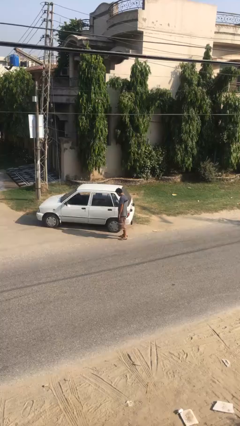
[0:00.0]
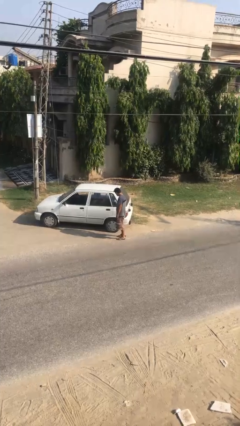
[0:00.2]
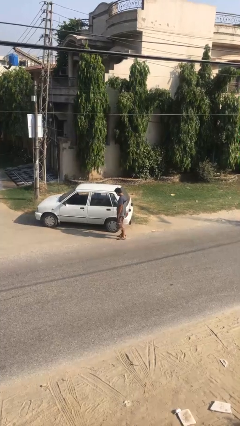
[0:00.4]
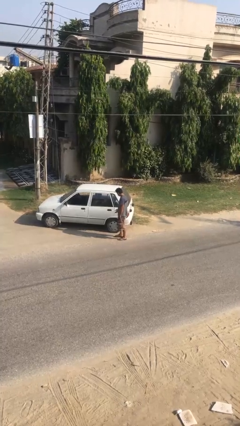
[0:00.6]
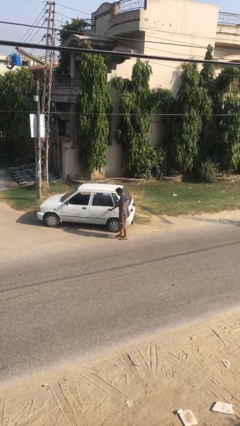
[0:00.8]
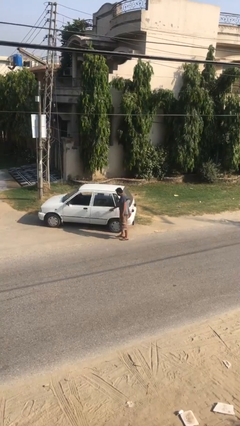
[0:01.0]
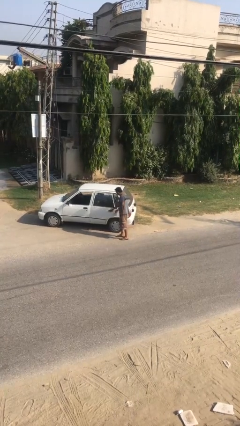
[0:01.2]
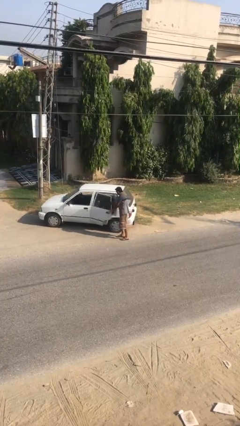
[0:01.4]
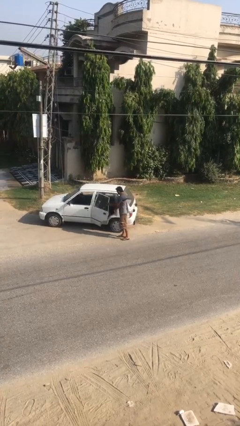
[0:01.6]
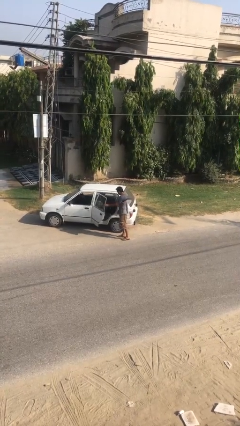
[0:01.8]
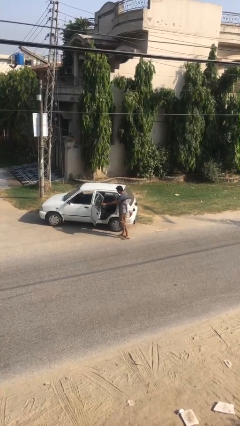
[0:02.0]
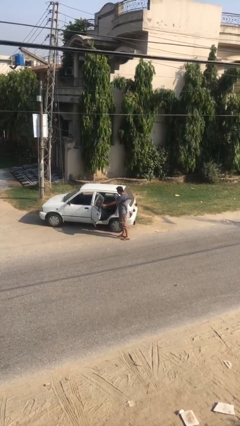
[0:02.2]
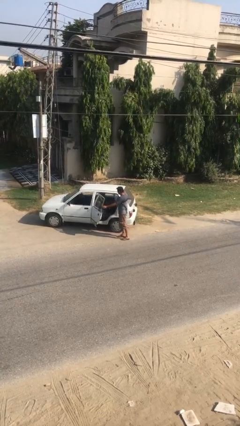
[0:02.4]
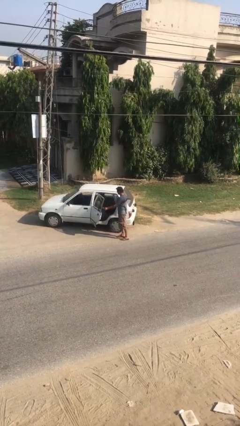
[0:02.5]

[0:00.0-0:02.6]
person opens car door

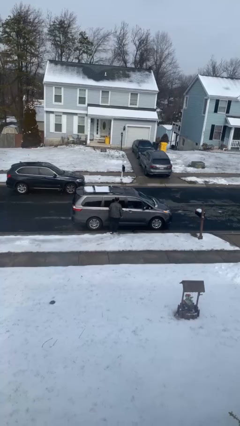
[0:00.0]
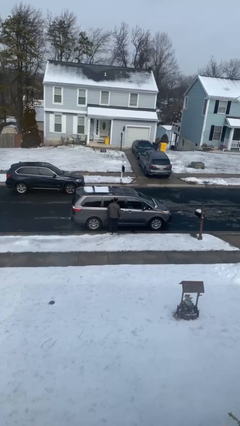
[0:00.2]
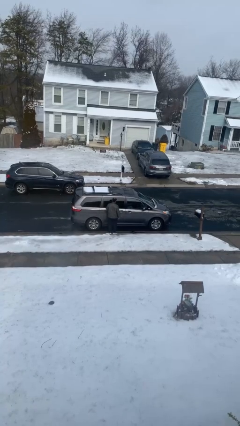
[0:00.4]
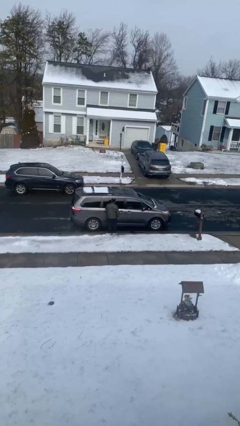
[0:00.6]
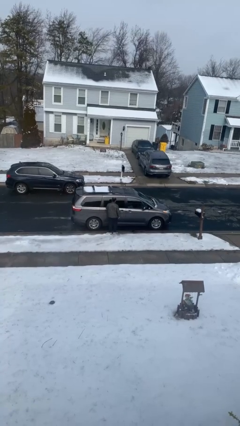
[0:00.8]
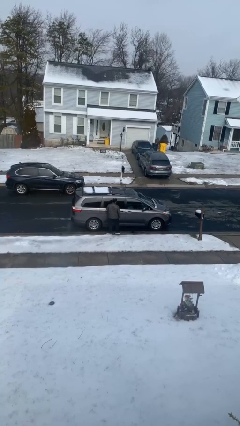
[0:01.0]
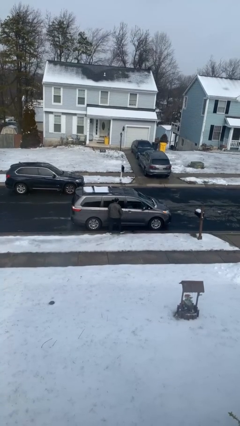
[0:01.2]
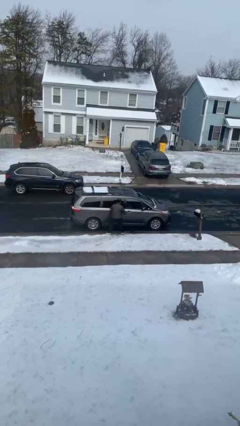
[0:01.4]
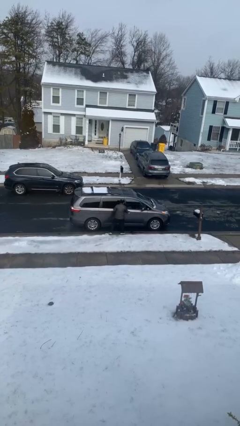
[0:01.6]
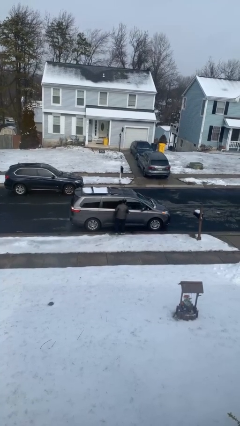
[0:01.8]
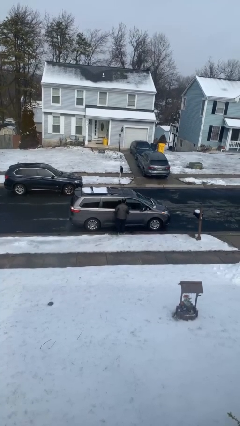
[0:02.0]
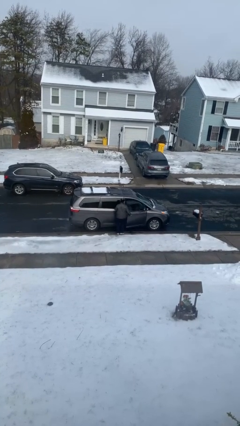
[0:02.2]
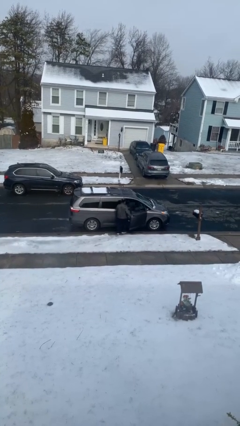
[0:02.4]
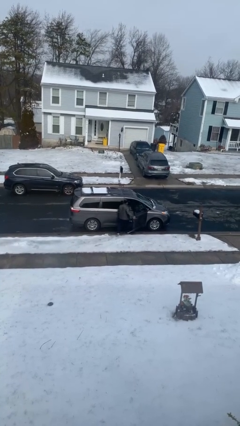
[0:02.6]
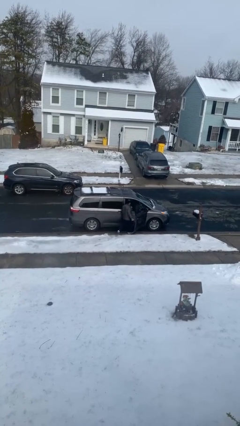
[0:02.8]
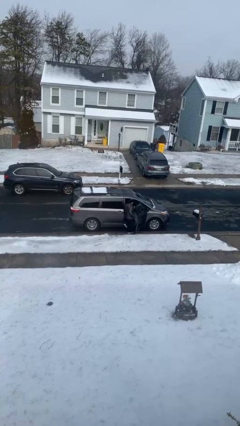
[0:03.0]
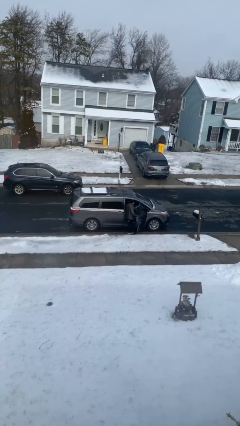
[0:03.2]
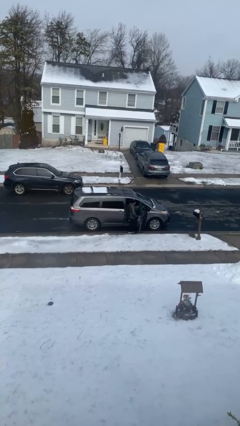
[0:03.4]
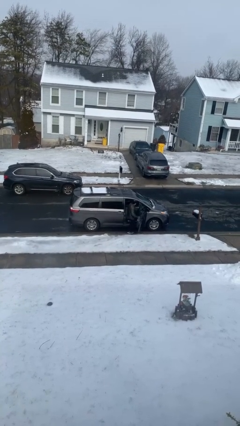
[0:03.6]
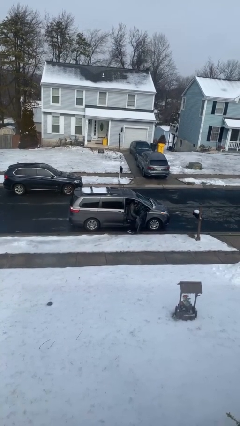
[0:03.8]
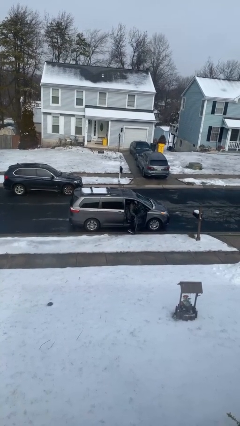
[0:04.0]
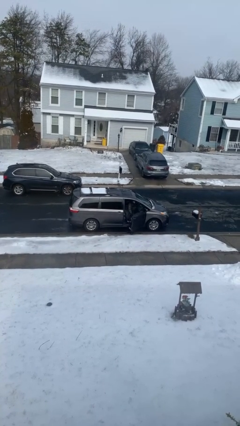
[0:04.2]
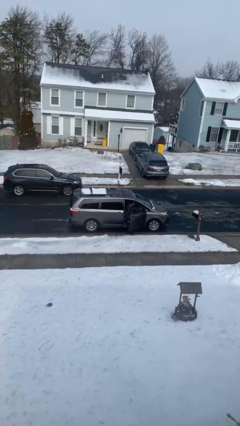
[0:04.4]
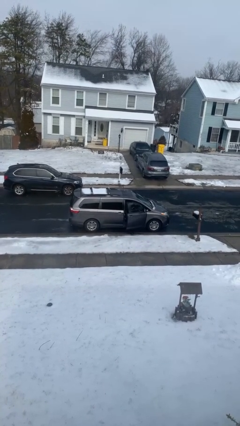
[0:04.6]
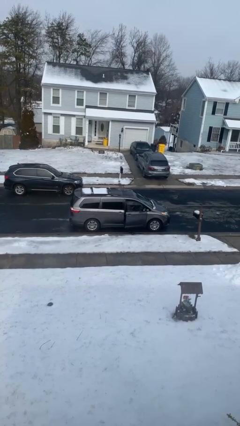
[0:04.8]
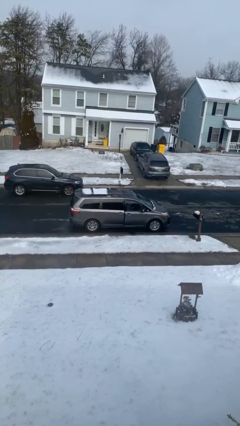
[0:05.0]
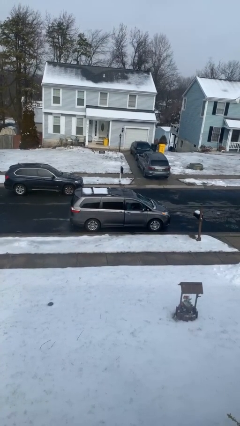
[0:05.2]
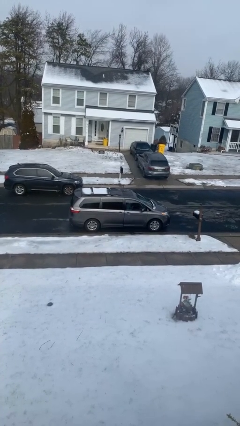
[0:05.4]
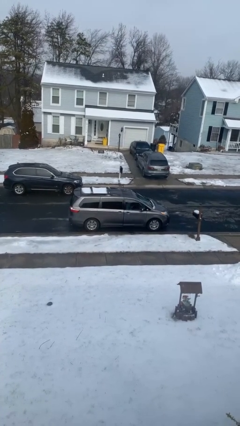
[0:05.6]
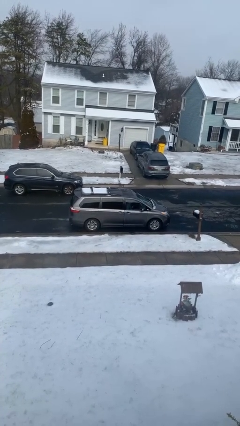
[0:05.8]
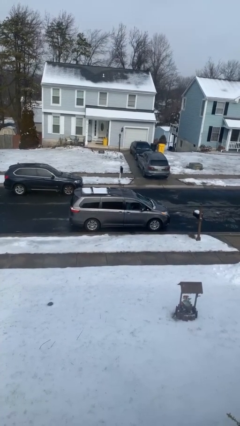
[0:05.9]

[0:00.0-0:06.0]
car picks up person

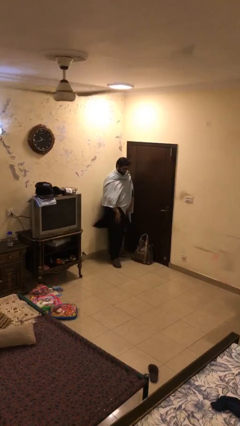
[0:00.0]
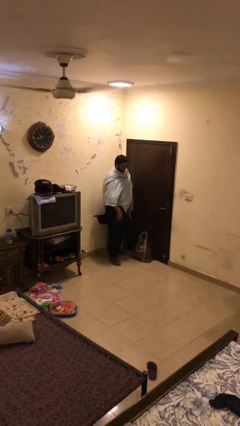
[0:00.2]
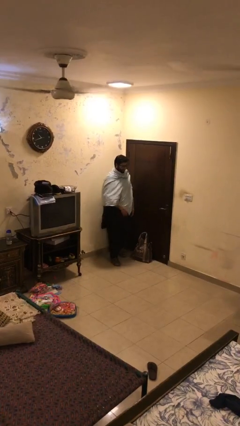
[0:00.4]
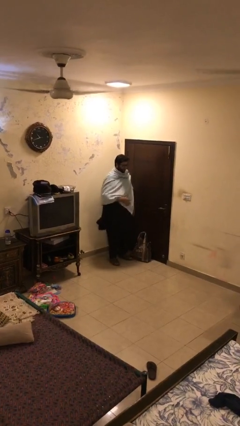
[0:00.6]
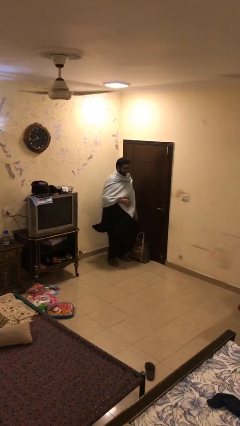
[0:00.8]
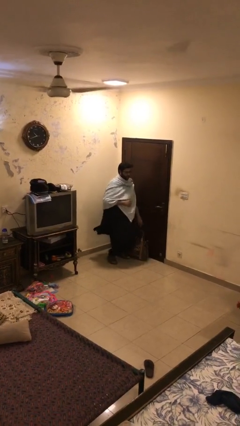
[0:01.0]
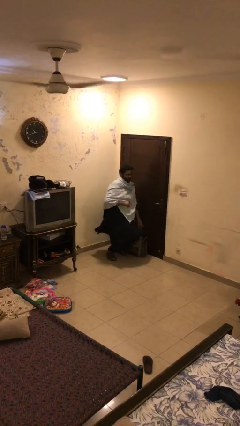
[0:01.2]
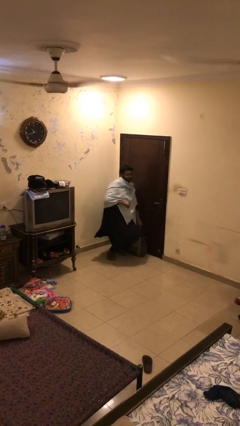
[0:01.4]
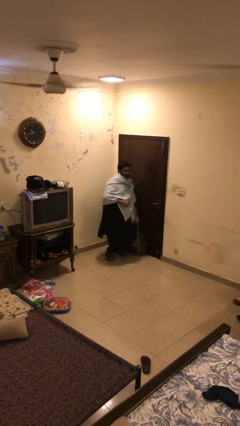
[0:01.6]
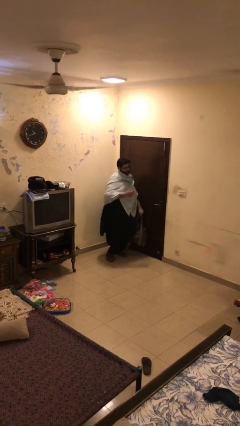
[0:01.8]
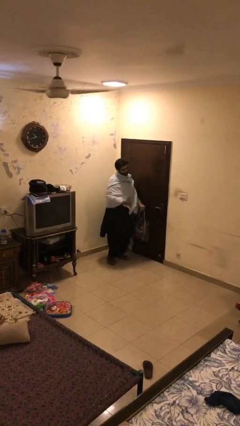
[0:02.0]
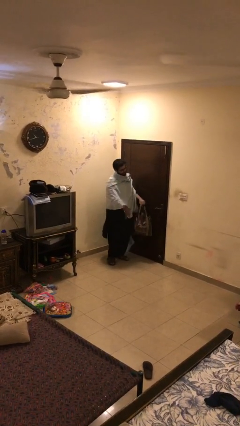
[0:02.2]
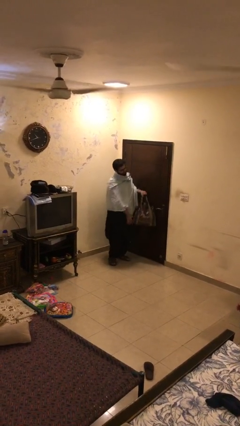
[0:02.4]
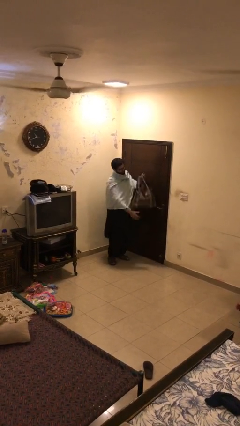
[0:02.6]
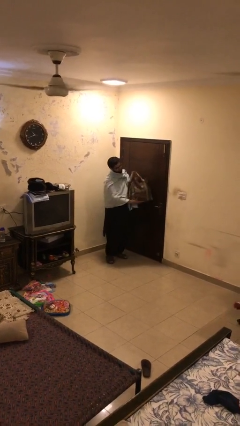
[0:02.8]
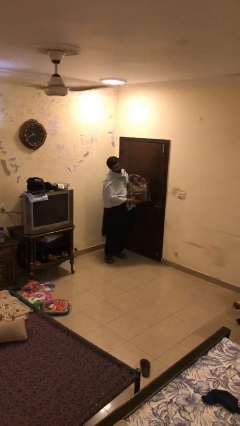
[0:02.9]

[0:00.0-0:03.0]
person picks up object from floor

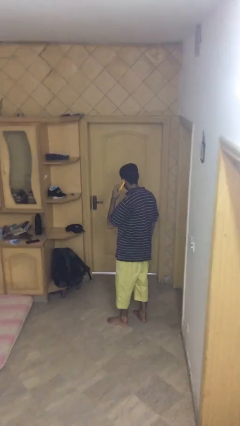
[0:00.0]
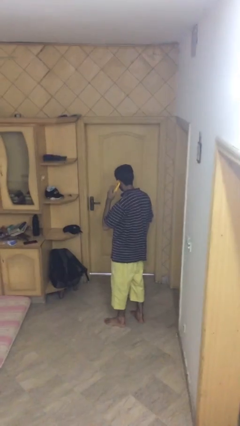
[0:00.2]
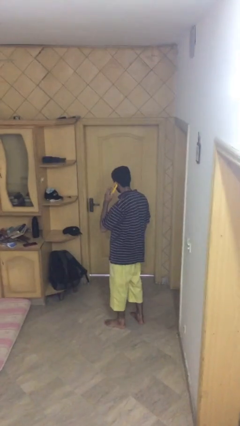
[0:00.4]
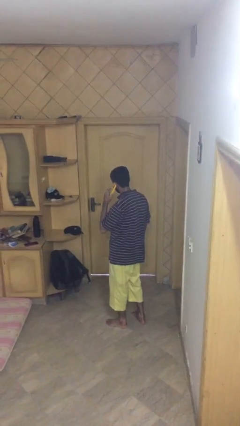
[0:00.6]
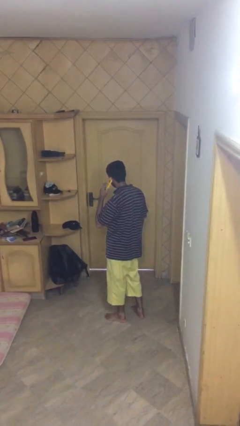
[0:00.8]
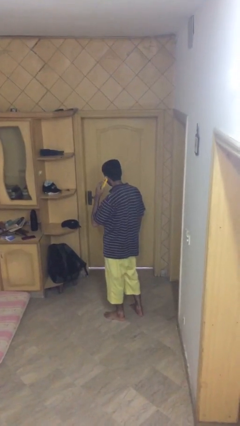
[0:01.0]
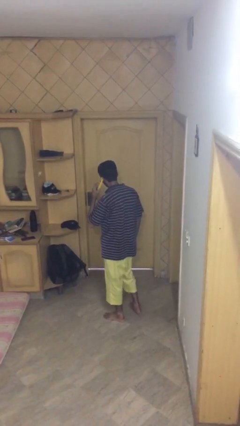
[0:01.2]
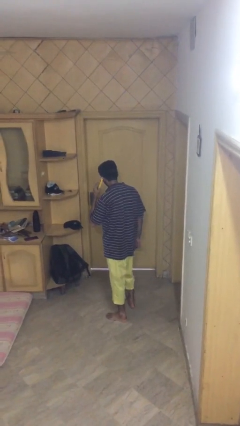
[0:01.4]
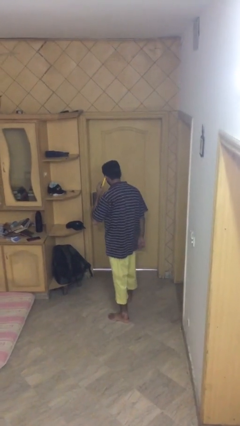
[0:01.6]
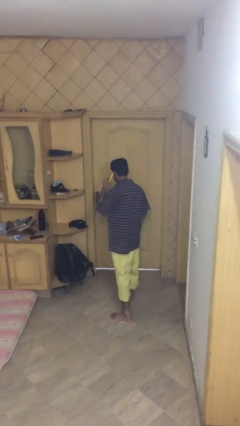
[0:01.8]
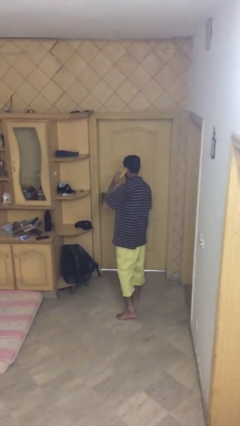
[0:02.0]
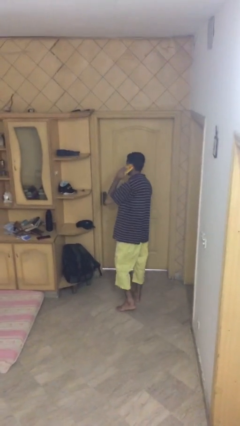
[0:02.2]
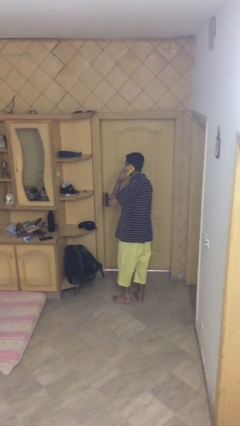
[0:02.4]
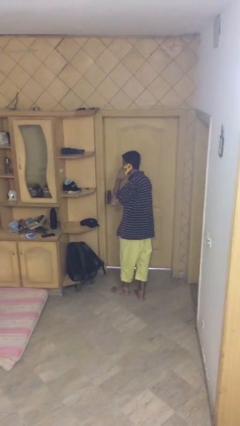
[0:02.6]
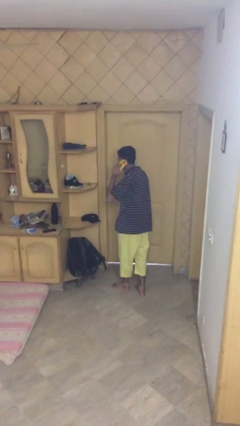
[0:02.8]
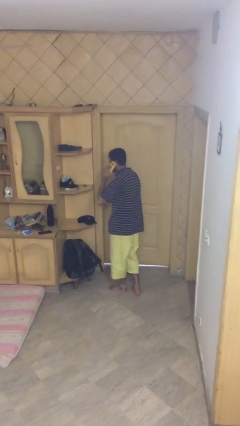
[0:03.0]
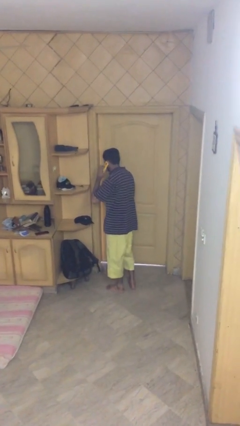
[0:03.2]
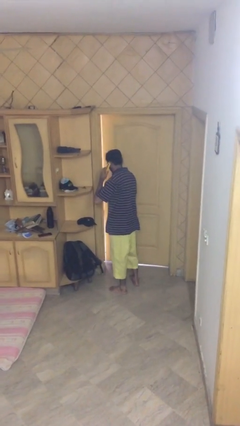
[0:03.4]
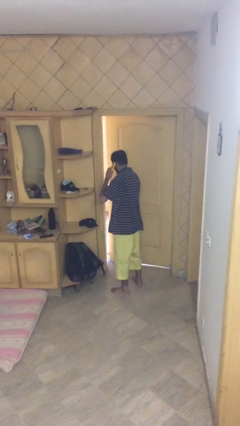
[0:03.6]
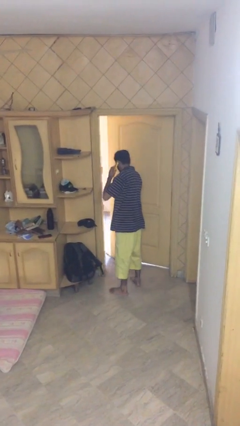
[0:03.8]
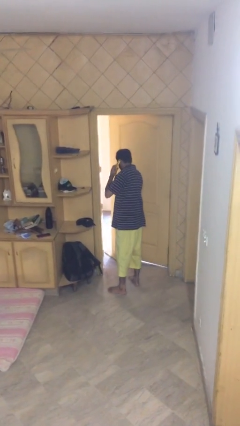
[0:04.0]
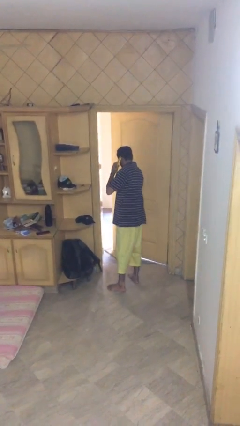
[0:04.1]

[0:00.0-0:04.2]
person opens facility door

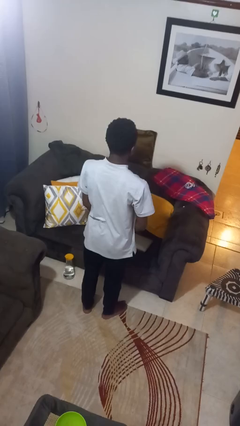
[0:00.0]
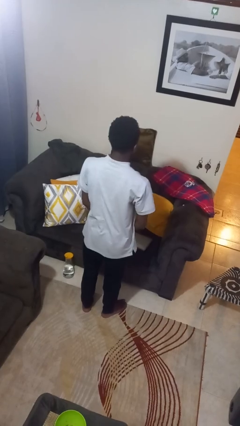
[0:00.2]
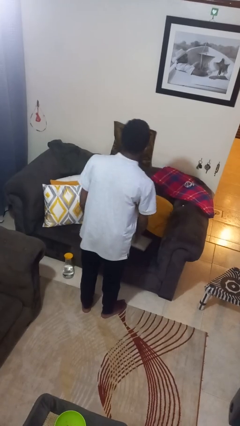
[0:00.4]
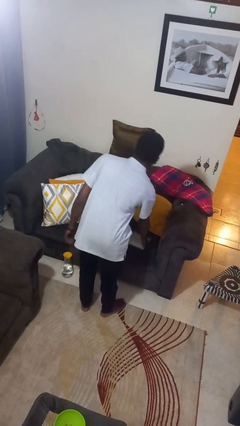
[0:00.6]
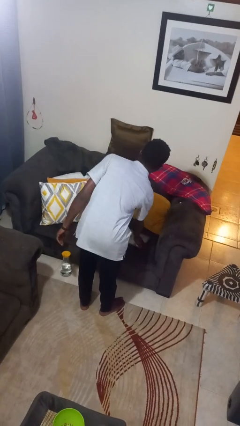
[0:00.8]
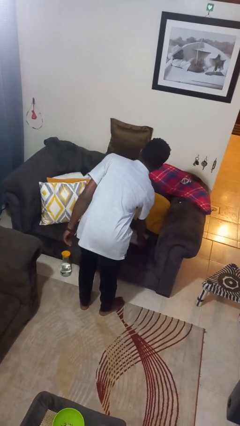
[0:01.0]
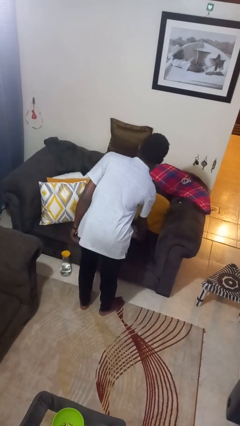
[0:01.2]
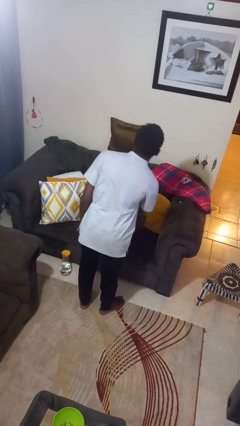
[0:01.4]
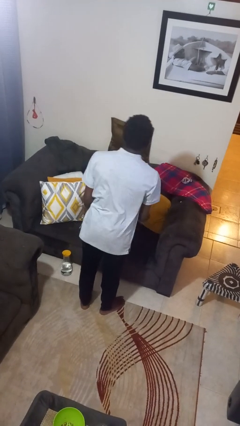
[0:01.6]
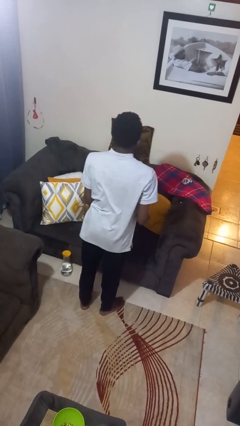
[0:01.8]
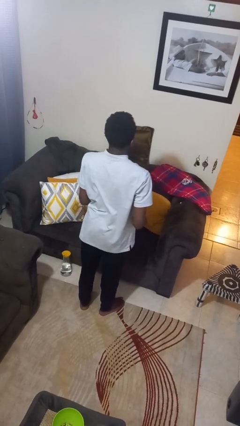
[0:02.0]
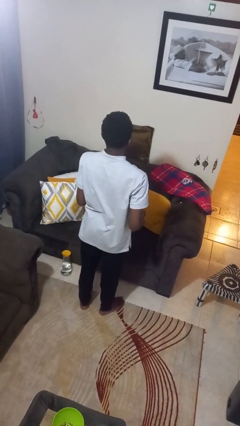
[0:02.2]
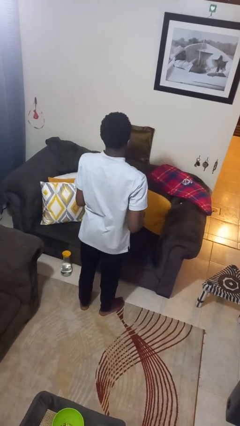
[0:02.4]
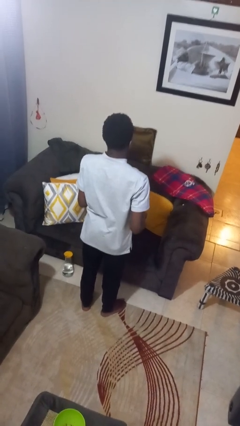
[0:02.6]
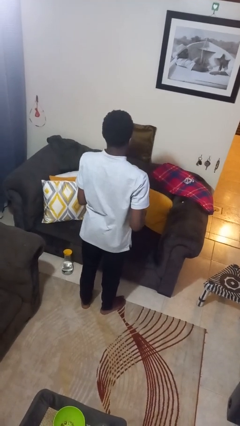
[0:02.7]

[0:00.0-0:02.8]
person picks up object from couch
